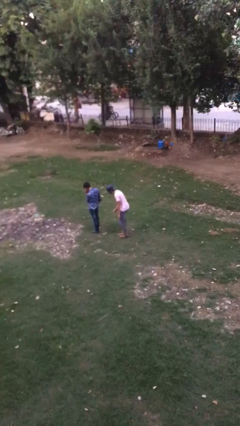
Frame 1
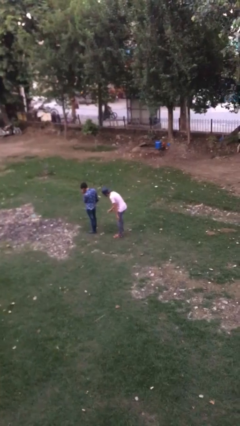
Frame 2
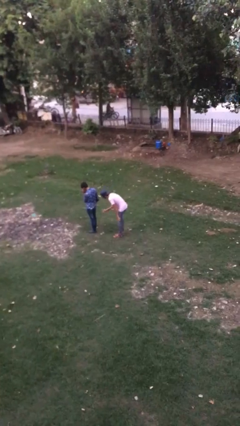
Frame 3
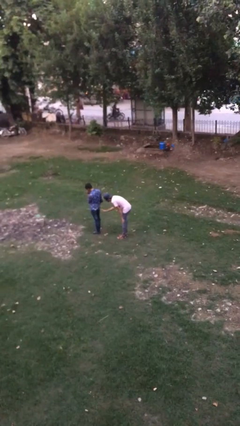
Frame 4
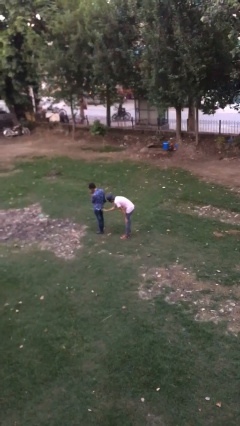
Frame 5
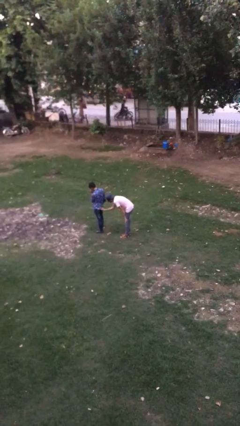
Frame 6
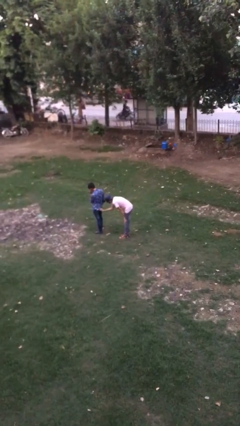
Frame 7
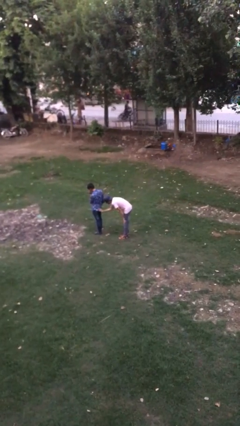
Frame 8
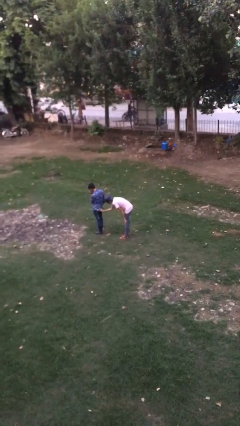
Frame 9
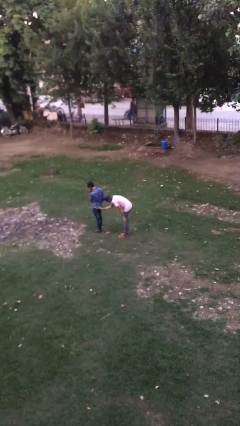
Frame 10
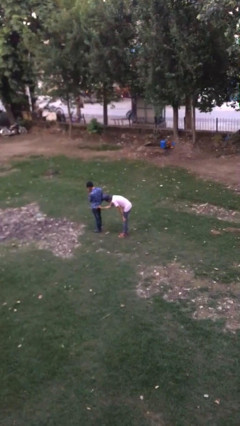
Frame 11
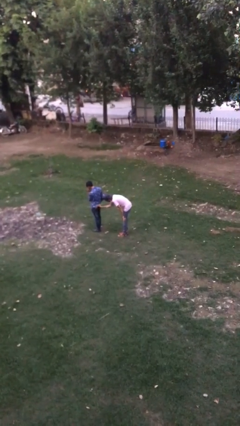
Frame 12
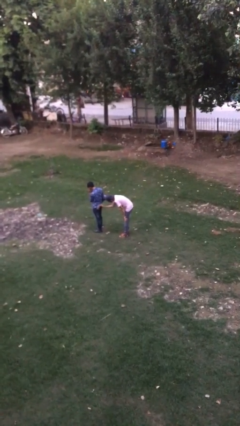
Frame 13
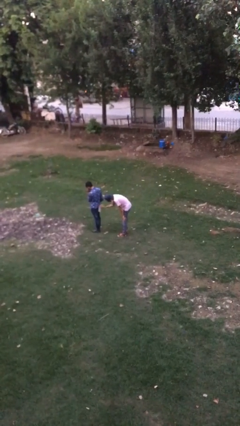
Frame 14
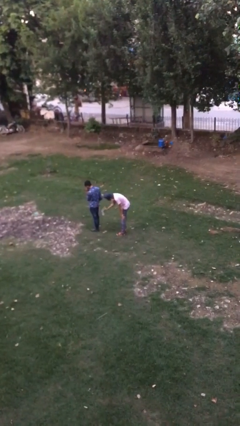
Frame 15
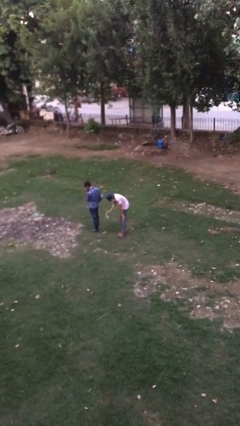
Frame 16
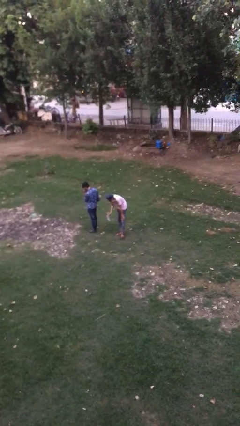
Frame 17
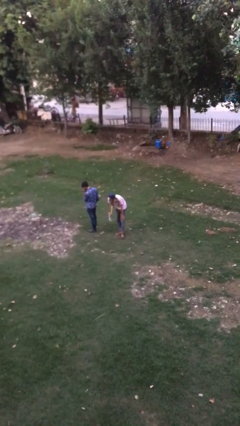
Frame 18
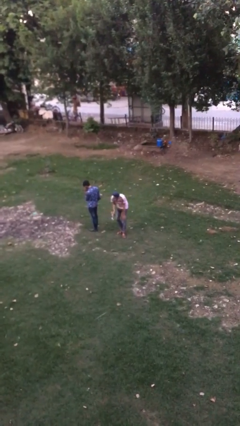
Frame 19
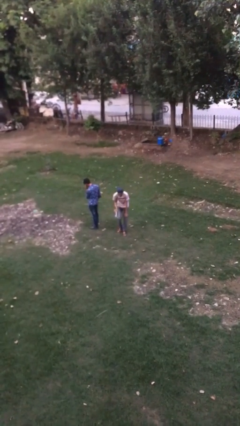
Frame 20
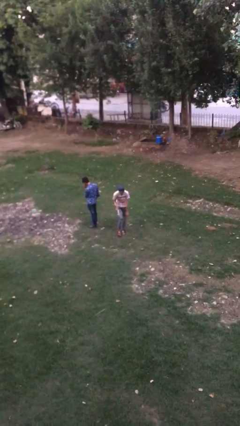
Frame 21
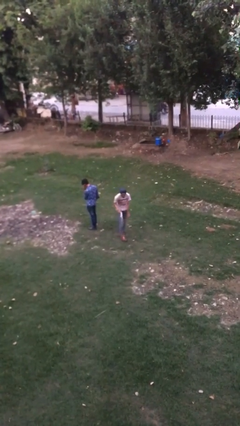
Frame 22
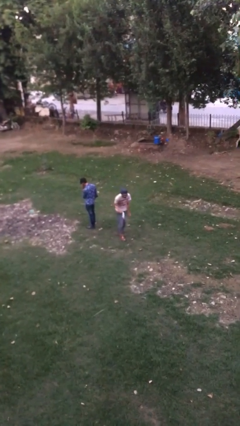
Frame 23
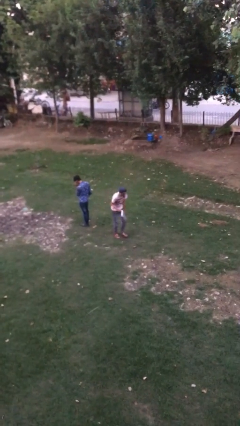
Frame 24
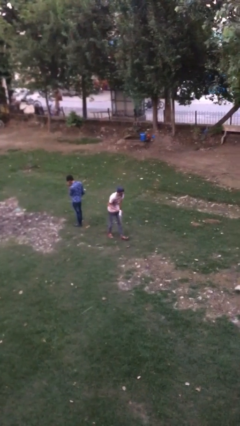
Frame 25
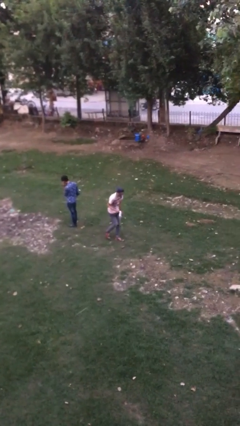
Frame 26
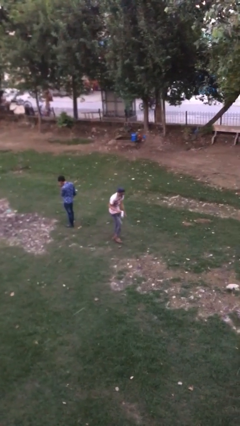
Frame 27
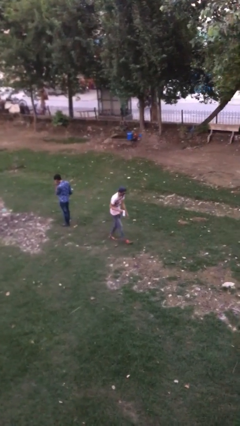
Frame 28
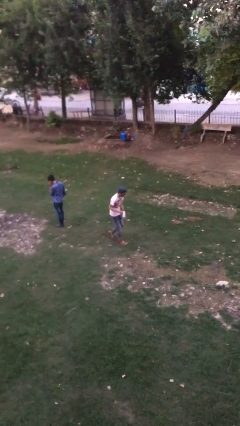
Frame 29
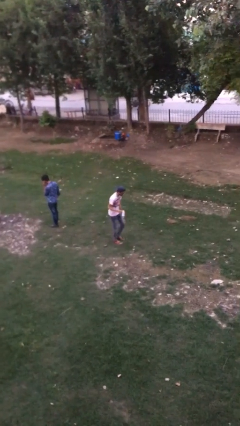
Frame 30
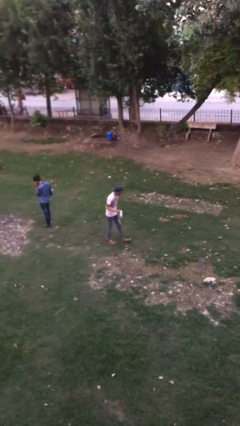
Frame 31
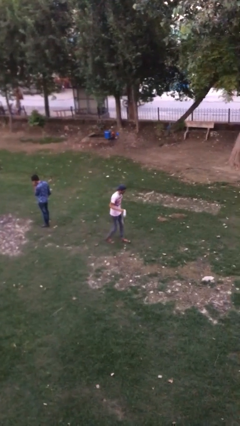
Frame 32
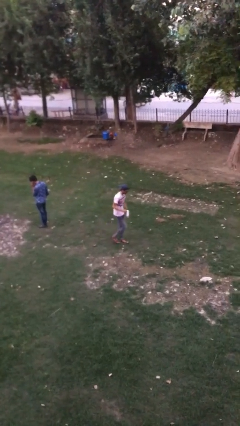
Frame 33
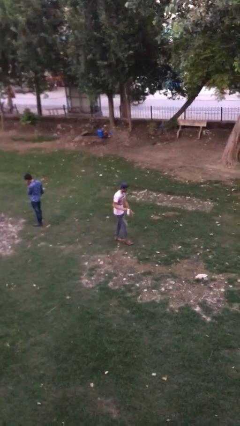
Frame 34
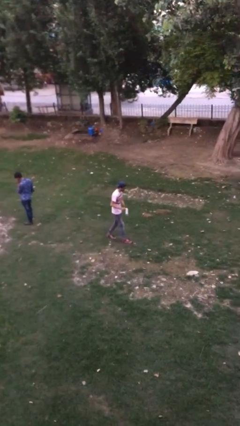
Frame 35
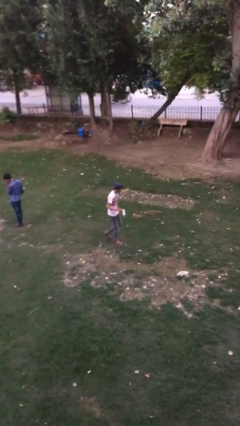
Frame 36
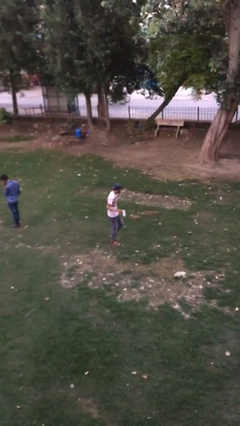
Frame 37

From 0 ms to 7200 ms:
person steals object from person

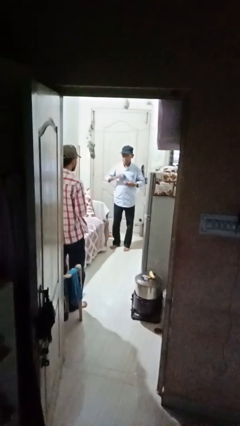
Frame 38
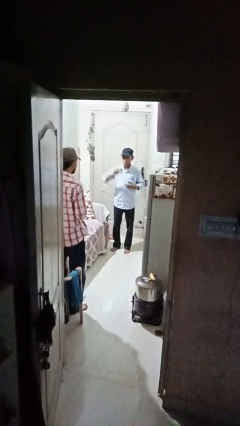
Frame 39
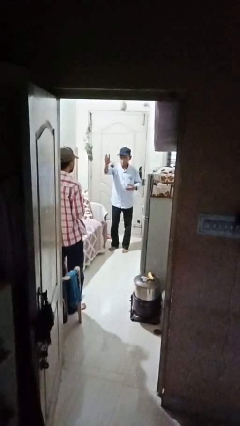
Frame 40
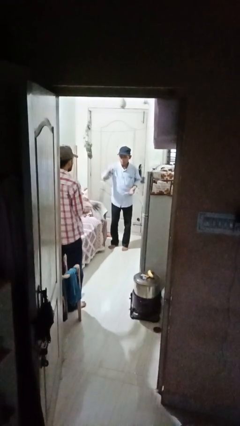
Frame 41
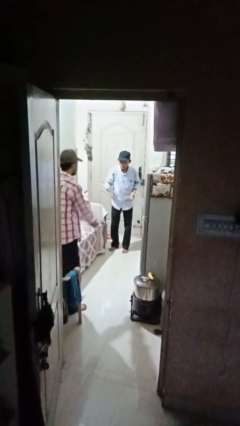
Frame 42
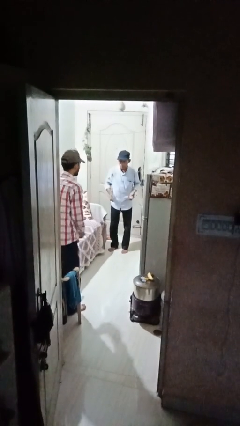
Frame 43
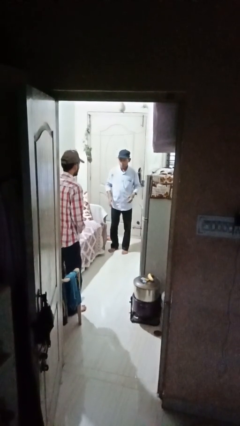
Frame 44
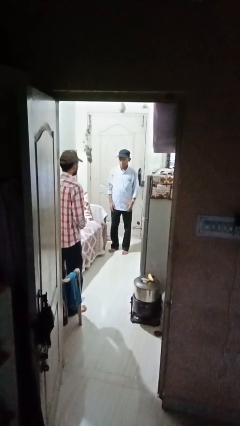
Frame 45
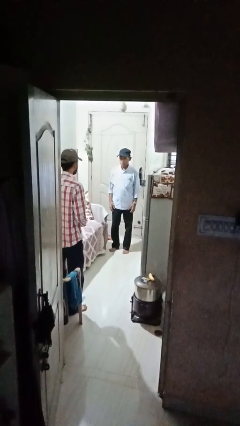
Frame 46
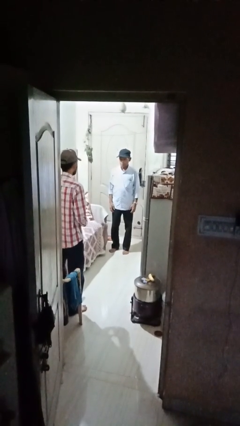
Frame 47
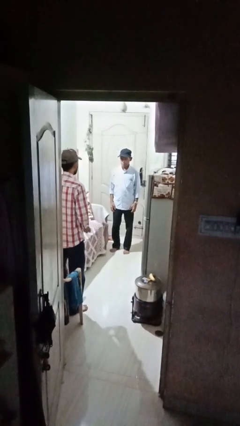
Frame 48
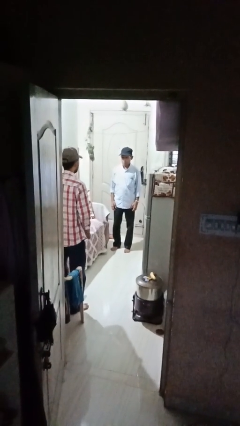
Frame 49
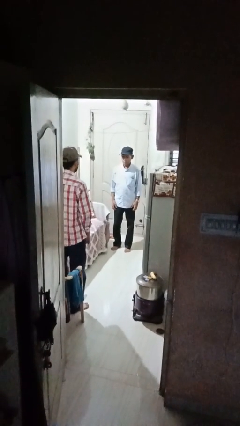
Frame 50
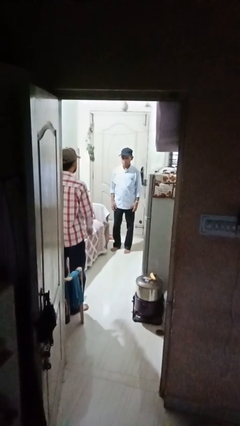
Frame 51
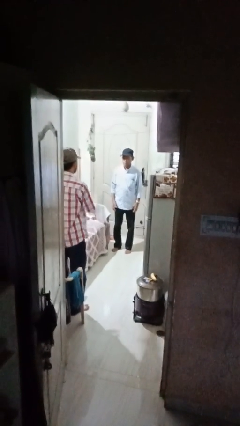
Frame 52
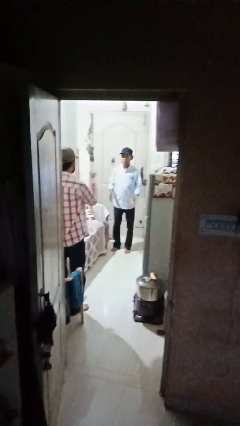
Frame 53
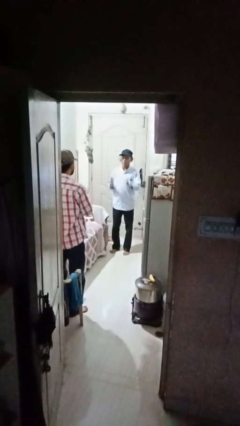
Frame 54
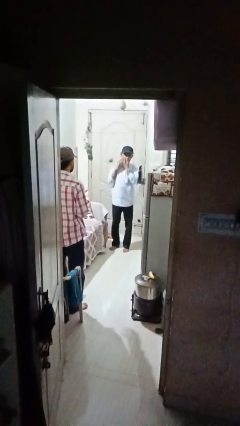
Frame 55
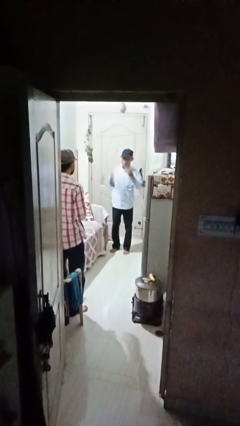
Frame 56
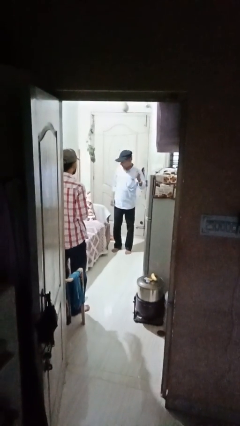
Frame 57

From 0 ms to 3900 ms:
person throws object to person

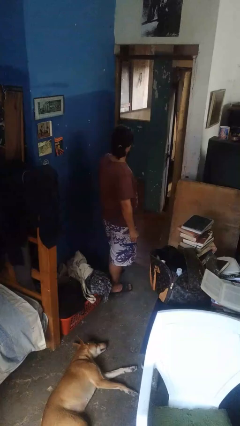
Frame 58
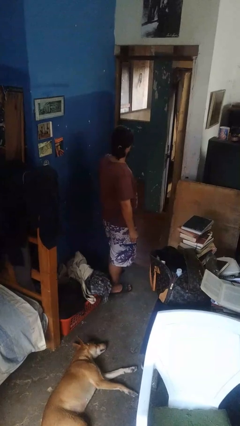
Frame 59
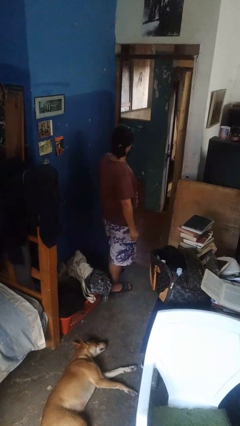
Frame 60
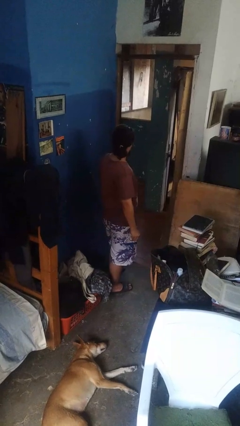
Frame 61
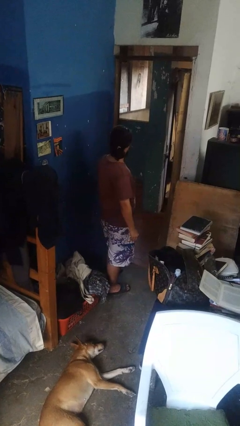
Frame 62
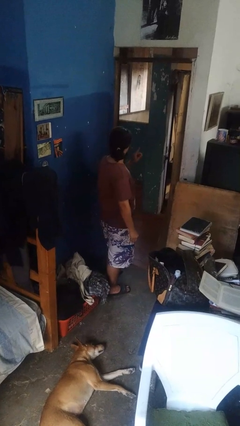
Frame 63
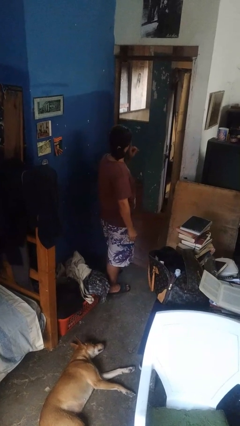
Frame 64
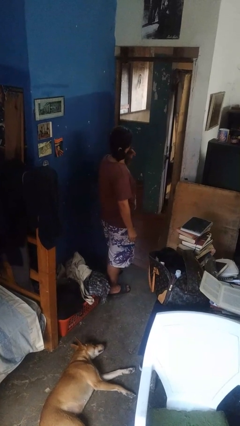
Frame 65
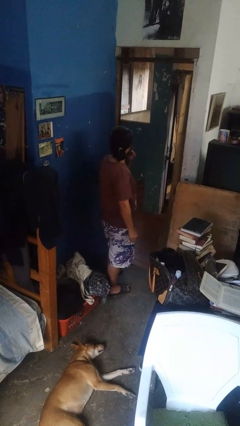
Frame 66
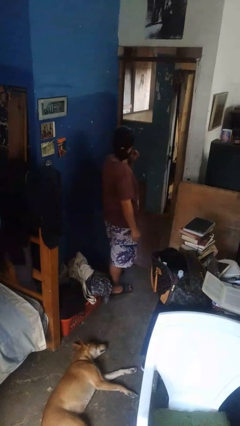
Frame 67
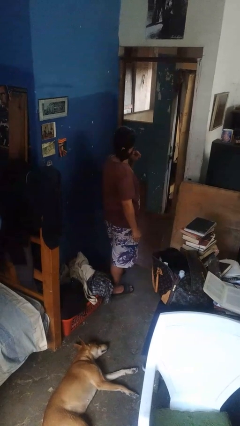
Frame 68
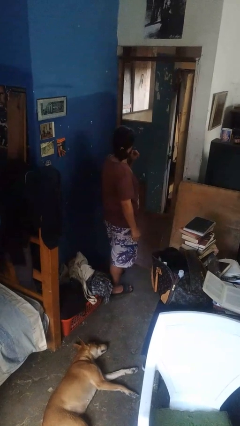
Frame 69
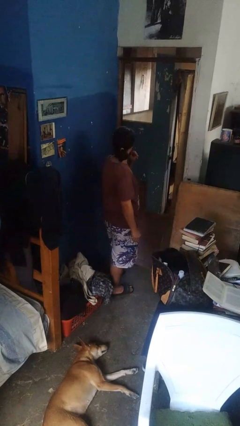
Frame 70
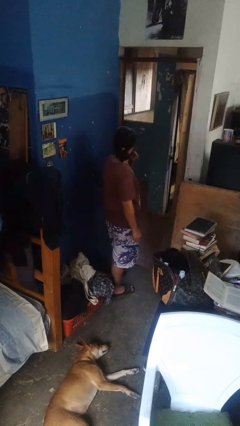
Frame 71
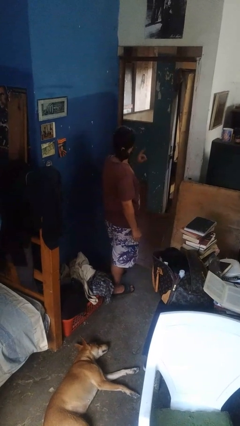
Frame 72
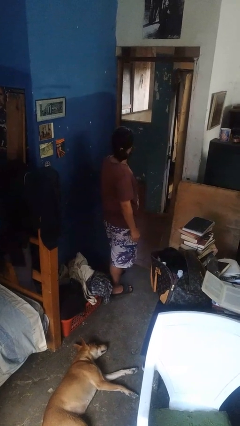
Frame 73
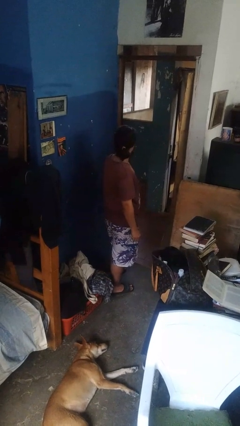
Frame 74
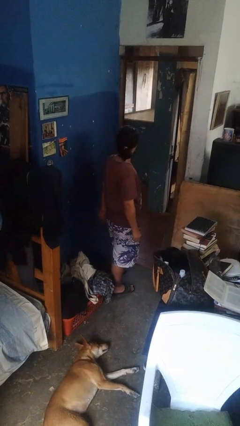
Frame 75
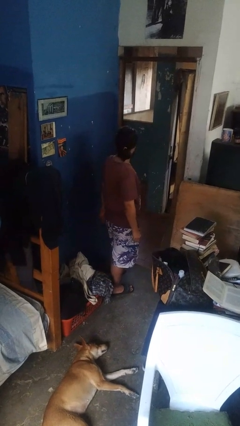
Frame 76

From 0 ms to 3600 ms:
person gestures be quiet

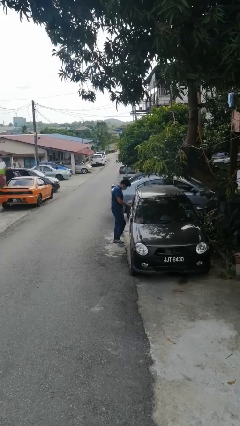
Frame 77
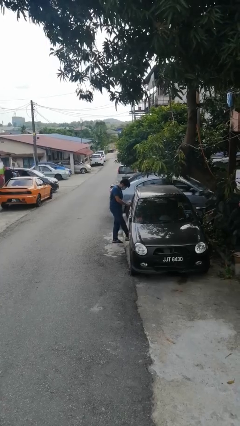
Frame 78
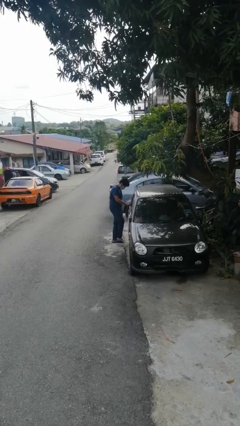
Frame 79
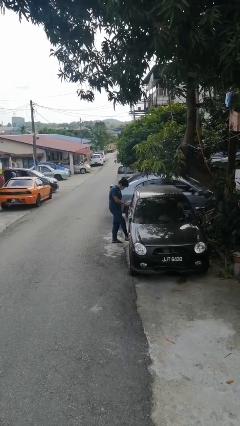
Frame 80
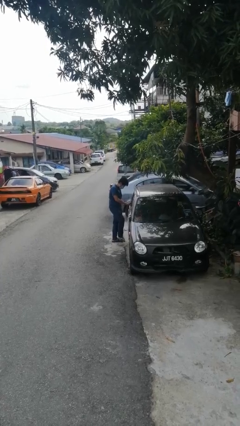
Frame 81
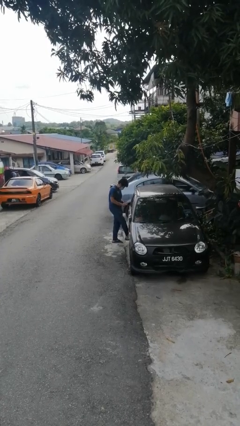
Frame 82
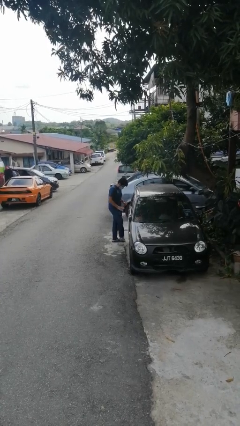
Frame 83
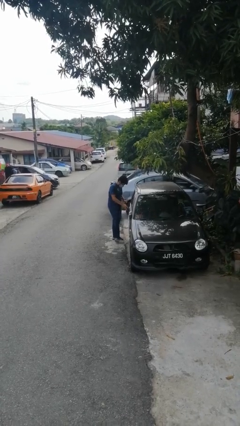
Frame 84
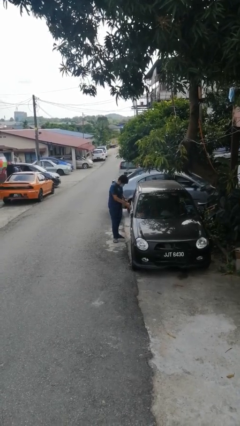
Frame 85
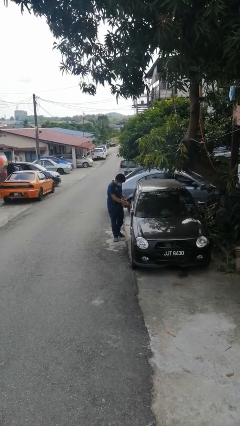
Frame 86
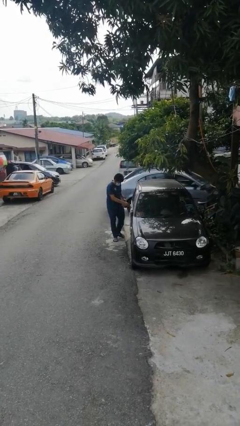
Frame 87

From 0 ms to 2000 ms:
person kicks car tires

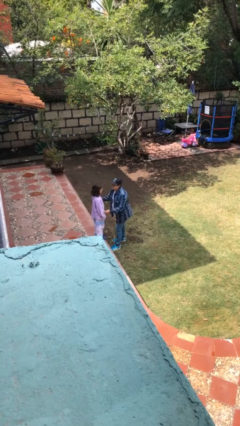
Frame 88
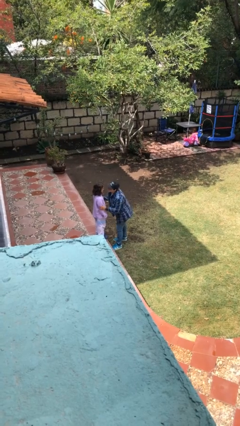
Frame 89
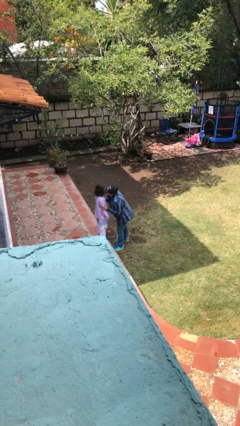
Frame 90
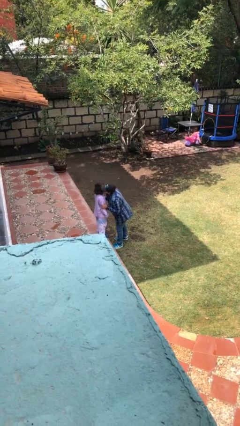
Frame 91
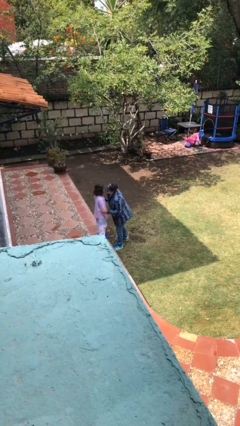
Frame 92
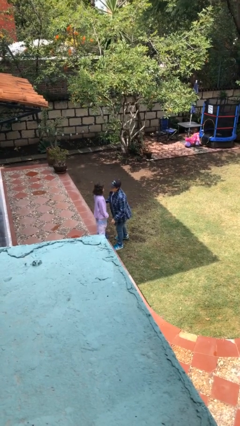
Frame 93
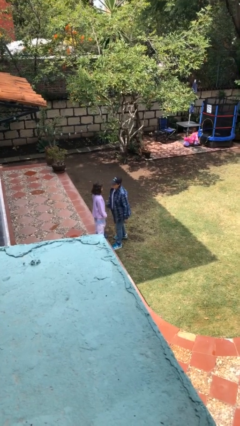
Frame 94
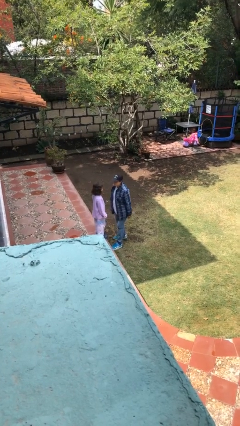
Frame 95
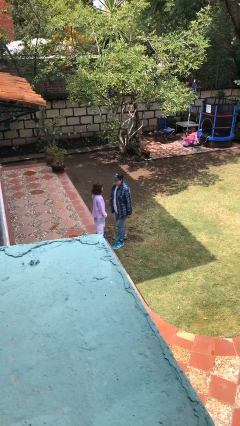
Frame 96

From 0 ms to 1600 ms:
person kisses cheek of person
